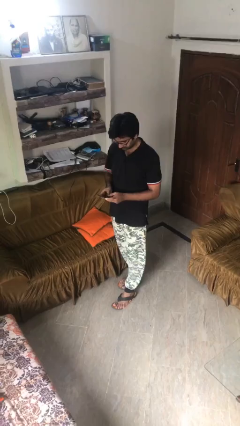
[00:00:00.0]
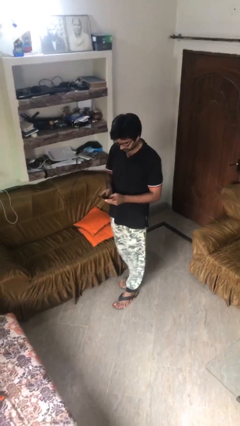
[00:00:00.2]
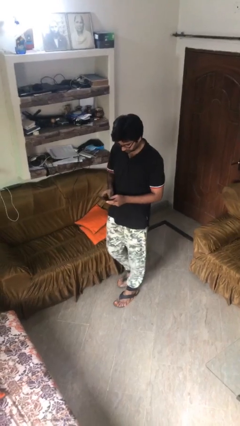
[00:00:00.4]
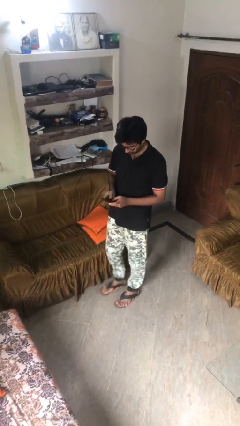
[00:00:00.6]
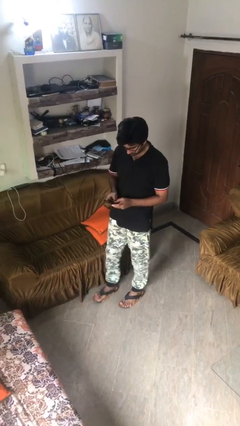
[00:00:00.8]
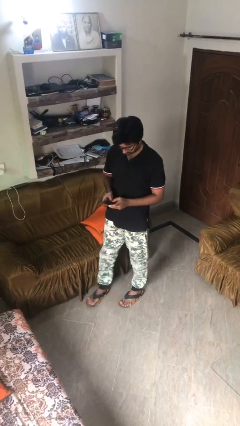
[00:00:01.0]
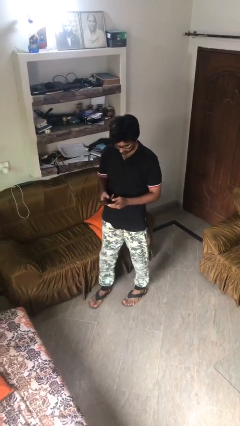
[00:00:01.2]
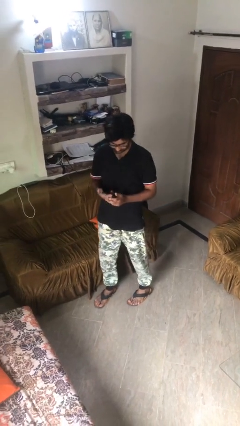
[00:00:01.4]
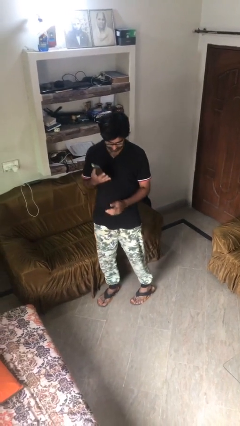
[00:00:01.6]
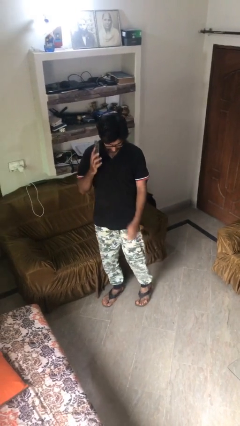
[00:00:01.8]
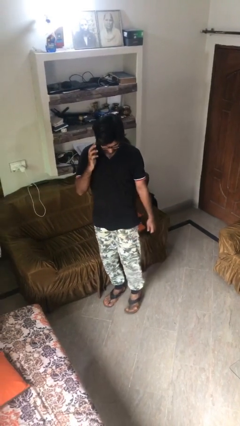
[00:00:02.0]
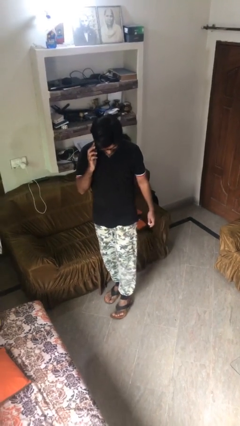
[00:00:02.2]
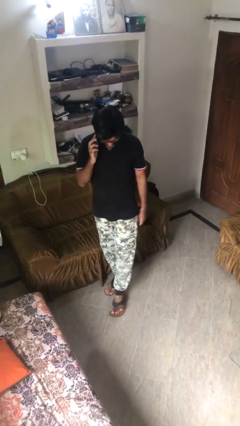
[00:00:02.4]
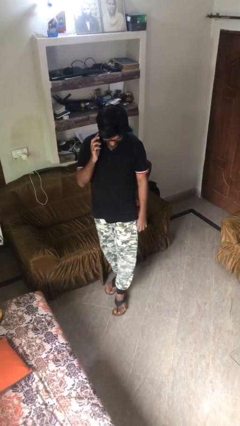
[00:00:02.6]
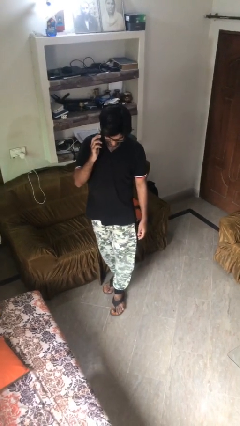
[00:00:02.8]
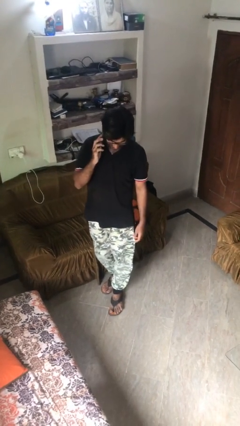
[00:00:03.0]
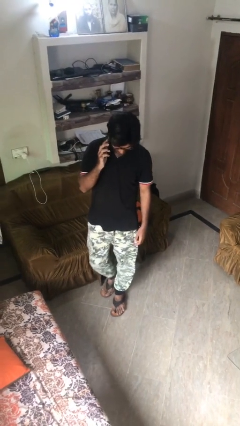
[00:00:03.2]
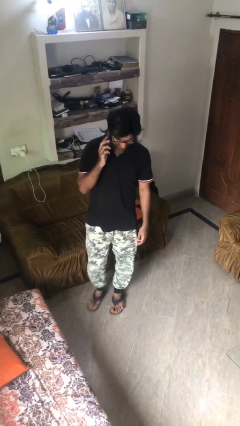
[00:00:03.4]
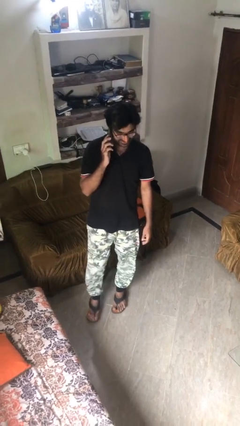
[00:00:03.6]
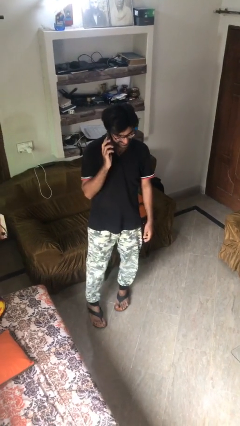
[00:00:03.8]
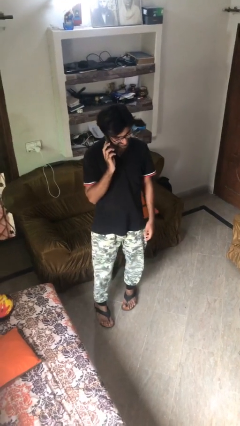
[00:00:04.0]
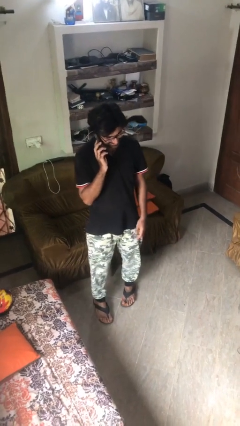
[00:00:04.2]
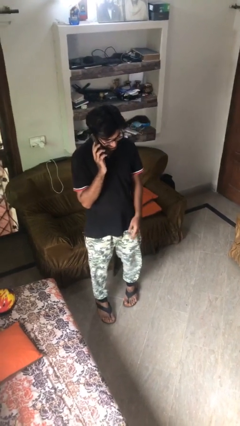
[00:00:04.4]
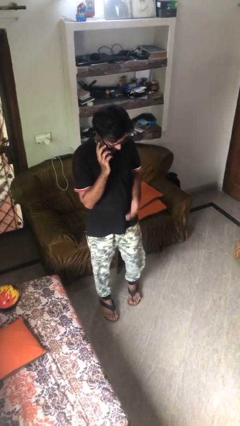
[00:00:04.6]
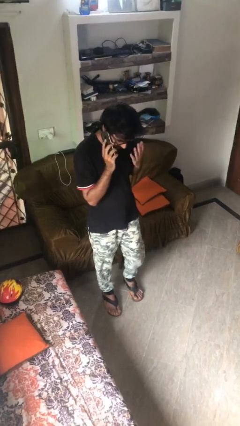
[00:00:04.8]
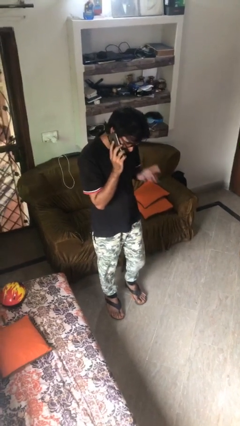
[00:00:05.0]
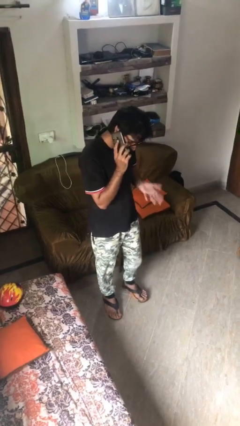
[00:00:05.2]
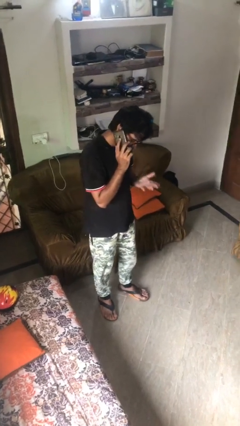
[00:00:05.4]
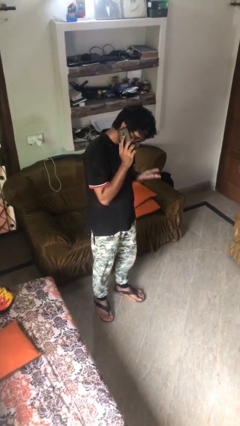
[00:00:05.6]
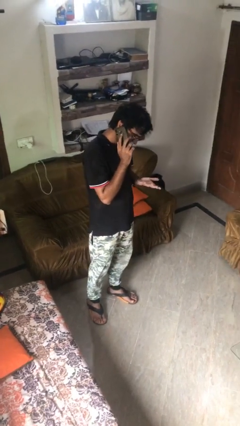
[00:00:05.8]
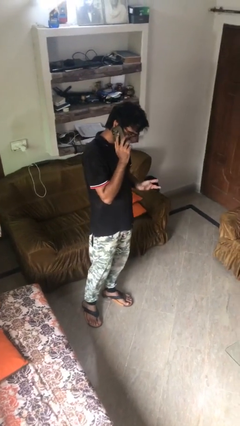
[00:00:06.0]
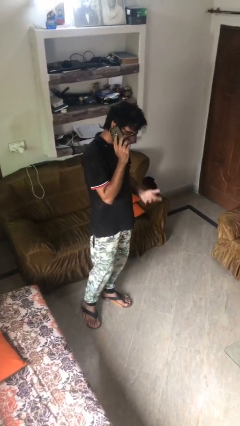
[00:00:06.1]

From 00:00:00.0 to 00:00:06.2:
person talks on phone

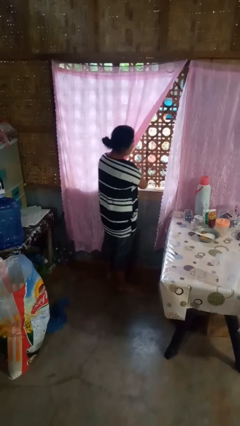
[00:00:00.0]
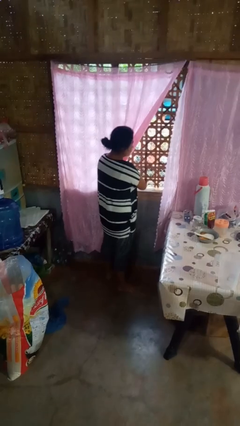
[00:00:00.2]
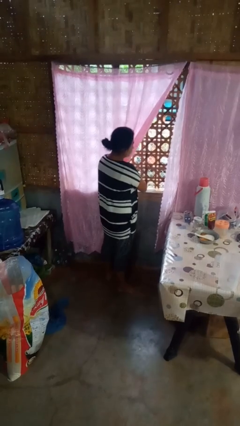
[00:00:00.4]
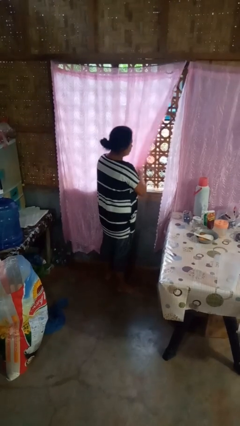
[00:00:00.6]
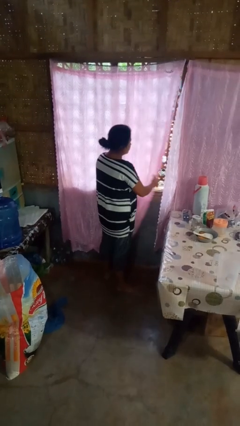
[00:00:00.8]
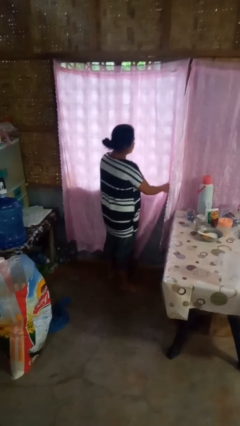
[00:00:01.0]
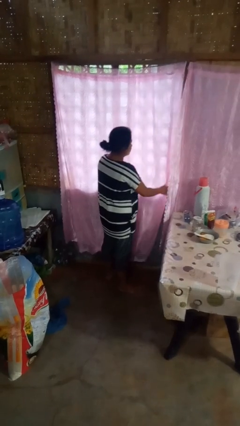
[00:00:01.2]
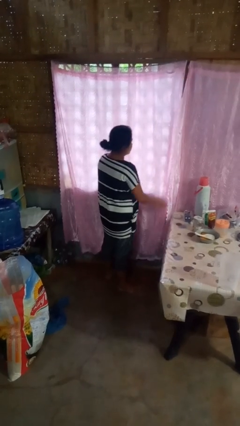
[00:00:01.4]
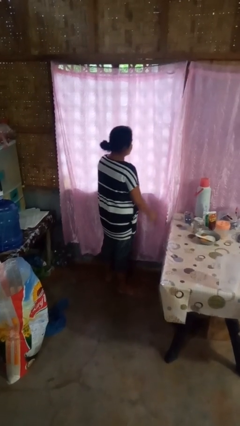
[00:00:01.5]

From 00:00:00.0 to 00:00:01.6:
person closes curtains

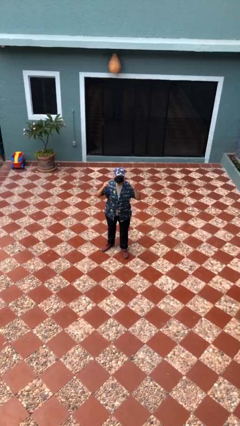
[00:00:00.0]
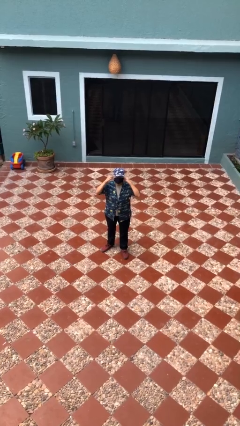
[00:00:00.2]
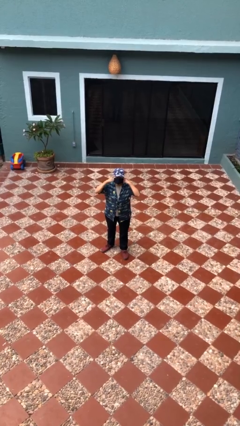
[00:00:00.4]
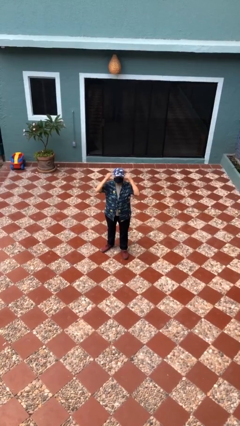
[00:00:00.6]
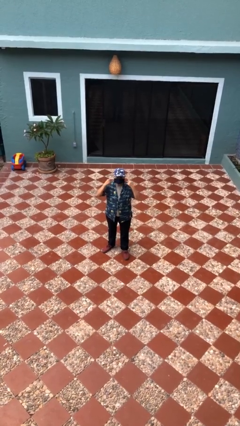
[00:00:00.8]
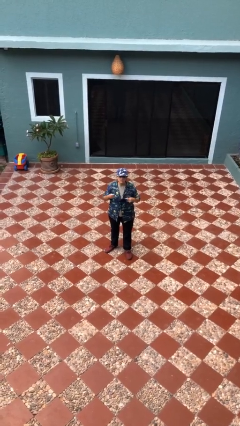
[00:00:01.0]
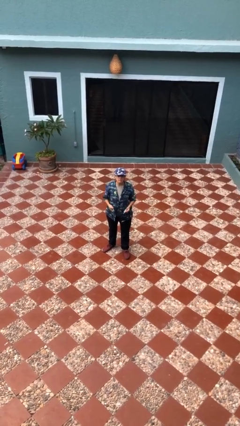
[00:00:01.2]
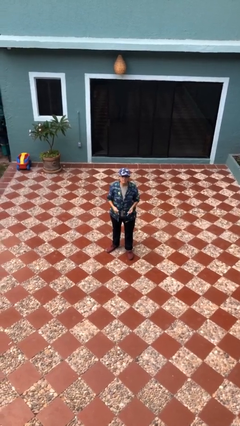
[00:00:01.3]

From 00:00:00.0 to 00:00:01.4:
person takes off facemask

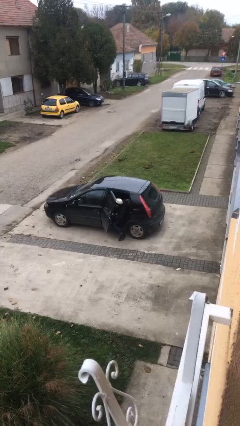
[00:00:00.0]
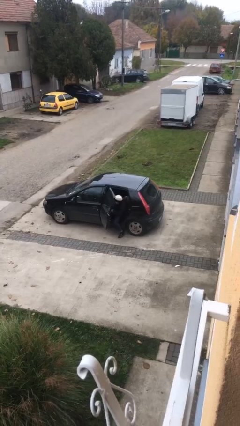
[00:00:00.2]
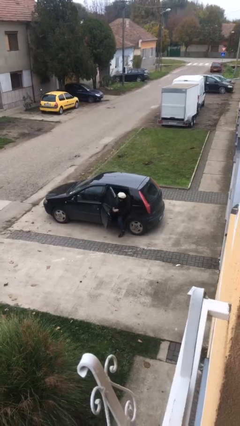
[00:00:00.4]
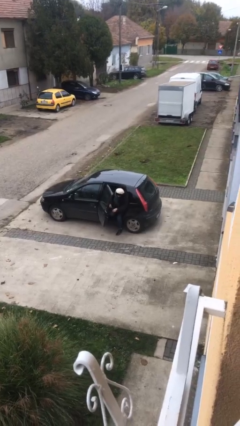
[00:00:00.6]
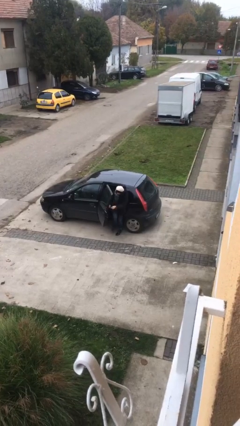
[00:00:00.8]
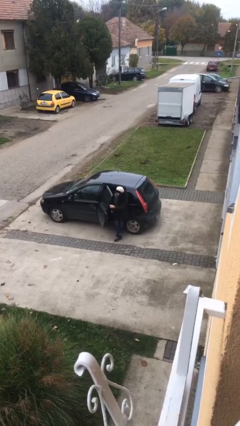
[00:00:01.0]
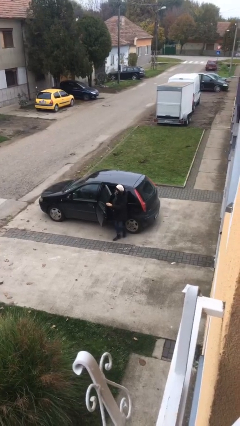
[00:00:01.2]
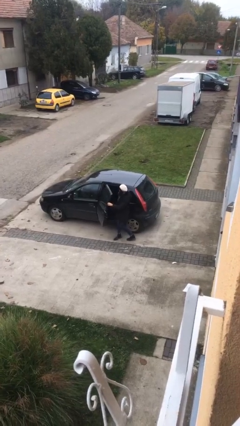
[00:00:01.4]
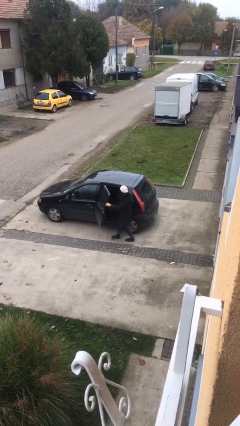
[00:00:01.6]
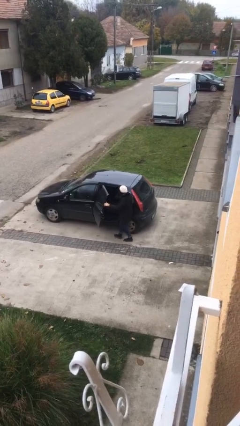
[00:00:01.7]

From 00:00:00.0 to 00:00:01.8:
person exits car

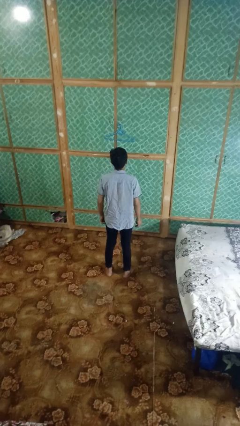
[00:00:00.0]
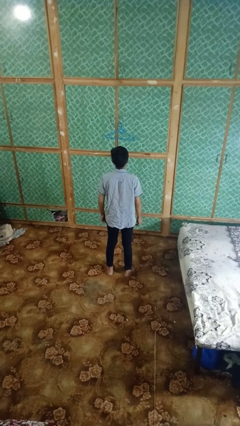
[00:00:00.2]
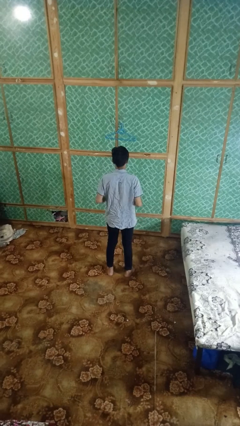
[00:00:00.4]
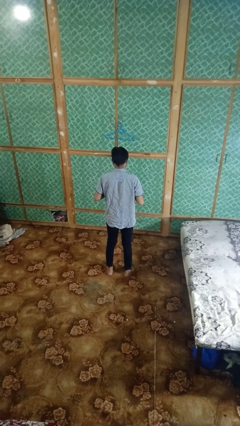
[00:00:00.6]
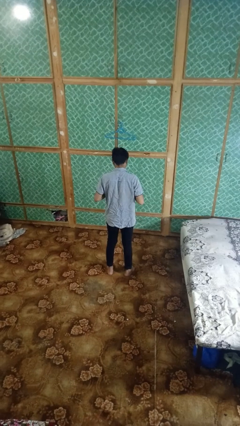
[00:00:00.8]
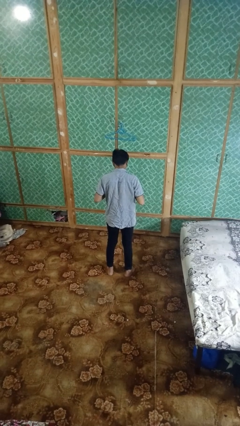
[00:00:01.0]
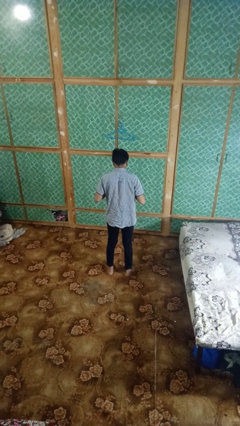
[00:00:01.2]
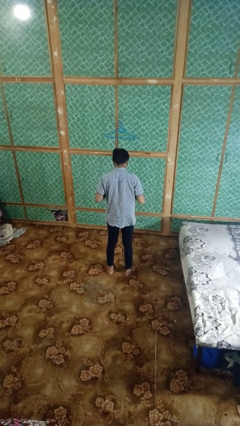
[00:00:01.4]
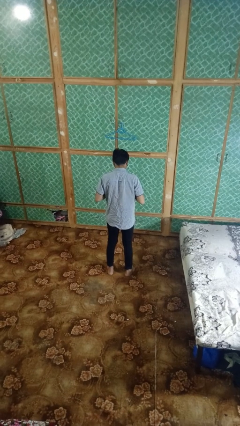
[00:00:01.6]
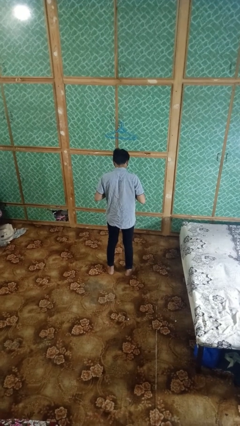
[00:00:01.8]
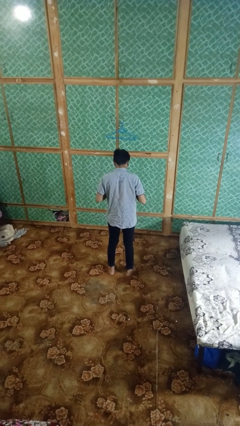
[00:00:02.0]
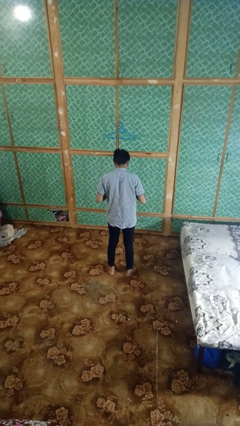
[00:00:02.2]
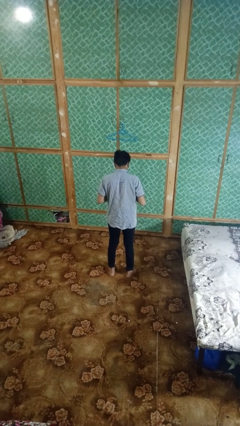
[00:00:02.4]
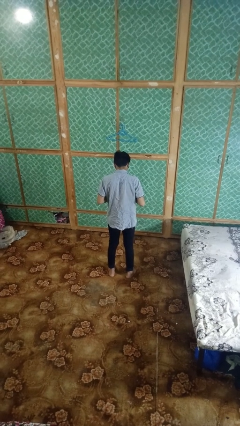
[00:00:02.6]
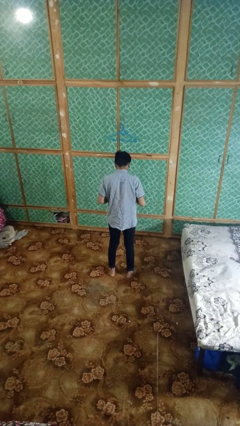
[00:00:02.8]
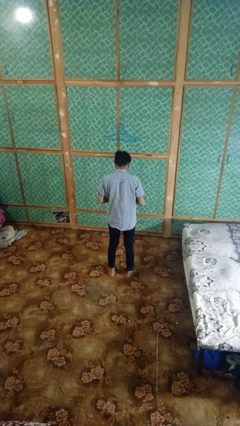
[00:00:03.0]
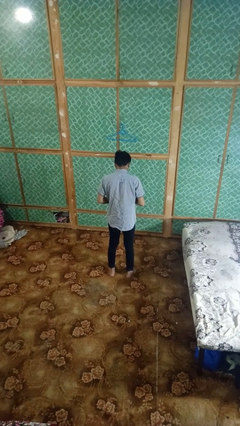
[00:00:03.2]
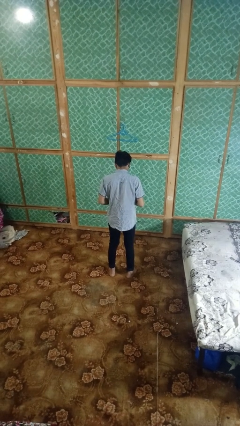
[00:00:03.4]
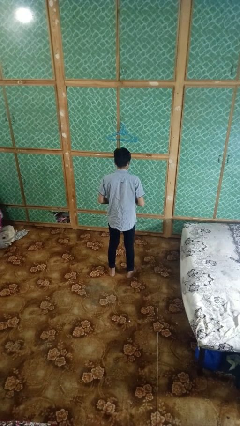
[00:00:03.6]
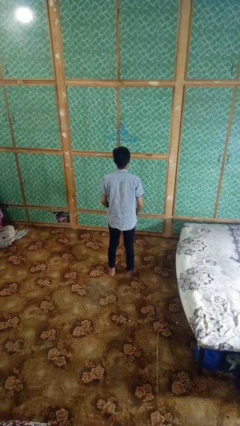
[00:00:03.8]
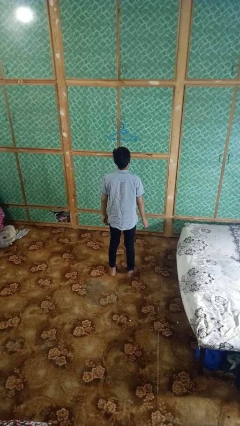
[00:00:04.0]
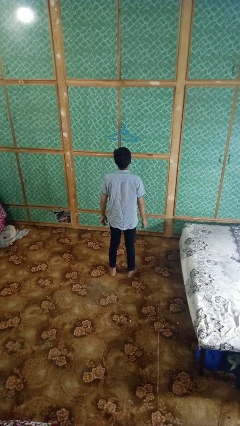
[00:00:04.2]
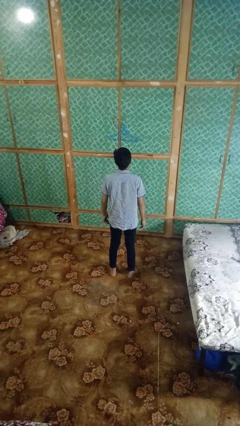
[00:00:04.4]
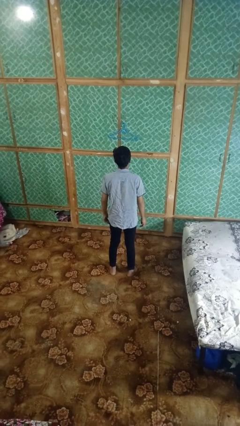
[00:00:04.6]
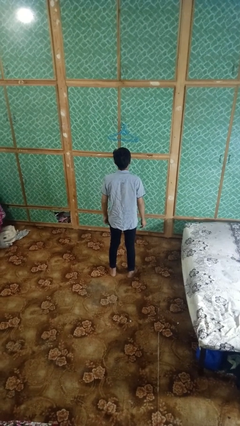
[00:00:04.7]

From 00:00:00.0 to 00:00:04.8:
person buttons shirt

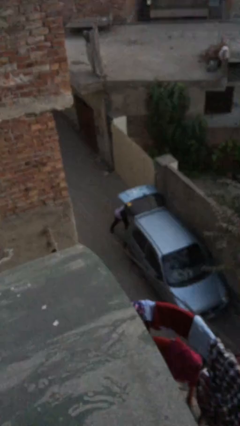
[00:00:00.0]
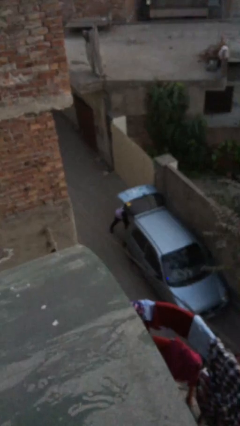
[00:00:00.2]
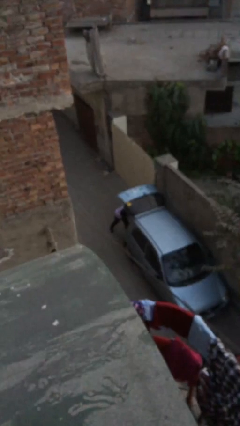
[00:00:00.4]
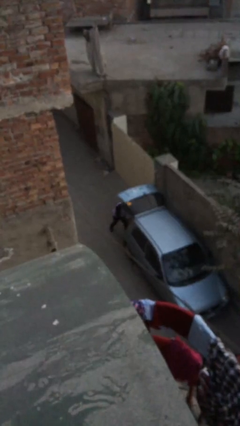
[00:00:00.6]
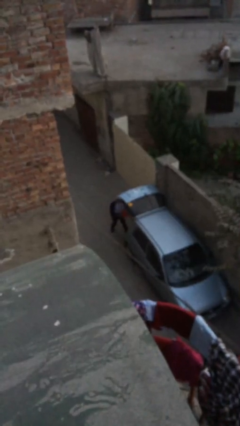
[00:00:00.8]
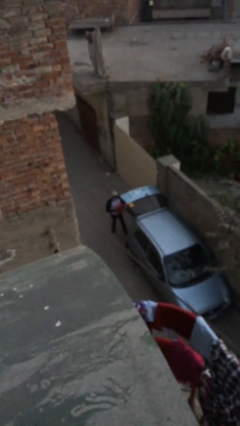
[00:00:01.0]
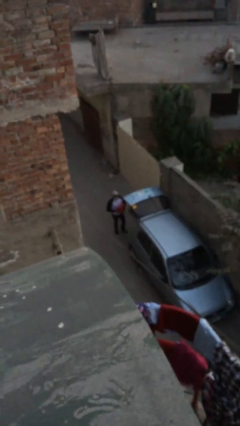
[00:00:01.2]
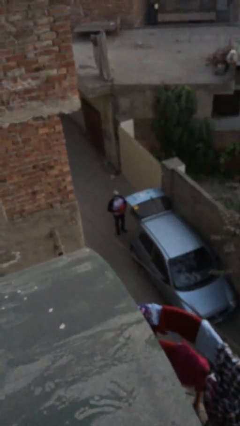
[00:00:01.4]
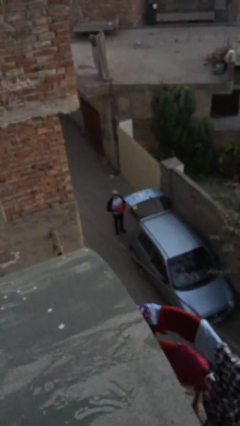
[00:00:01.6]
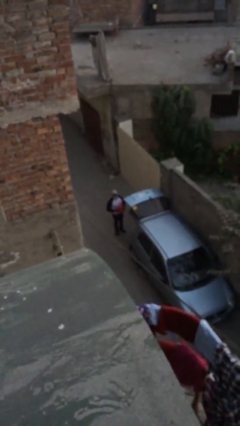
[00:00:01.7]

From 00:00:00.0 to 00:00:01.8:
person unloads car
